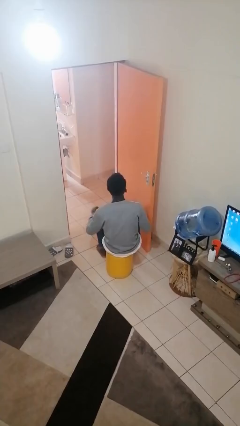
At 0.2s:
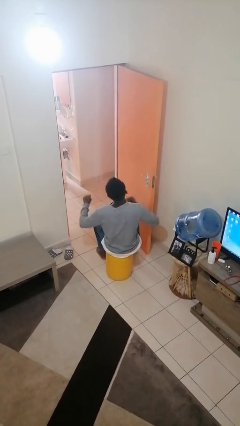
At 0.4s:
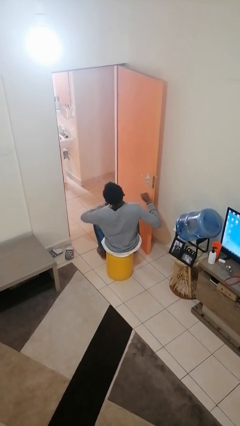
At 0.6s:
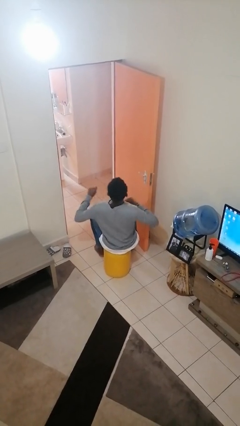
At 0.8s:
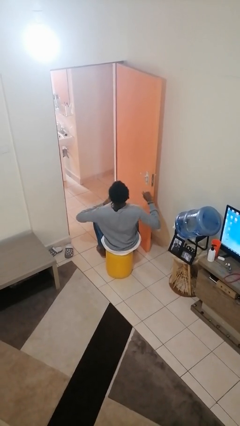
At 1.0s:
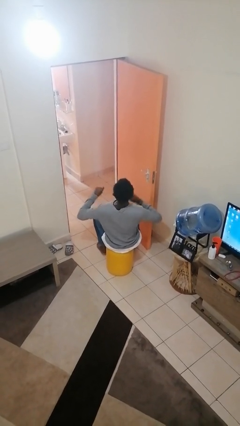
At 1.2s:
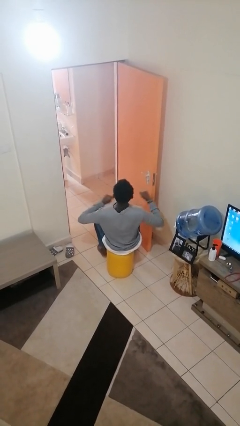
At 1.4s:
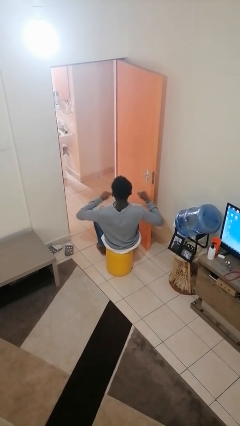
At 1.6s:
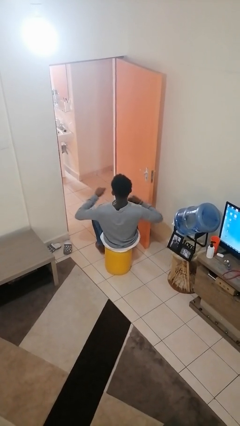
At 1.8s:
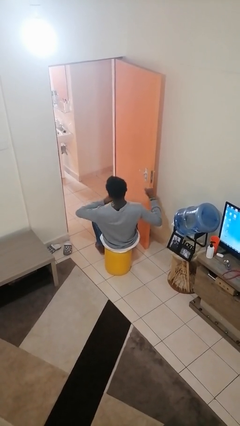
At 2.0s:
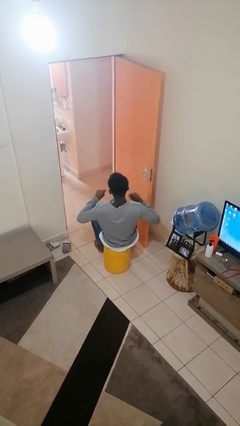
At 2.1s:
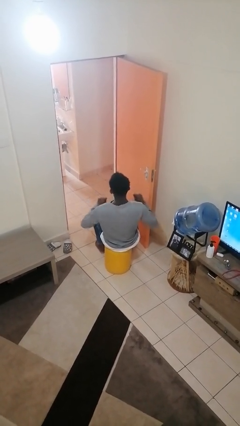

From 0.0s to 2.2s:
person drums on chest

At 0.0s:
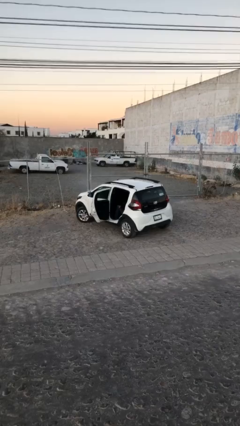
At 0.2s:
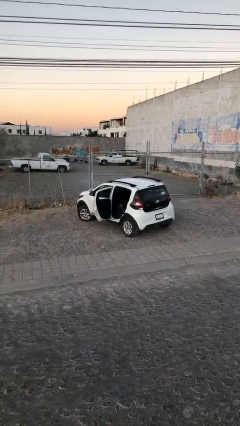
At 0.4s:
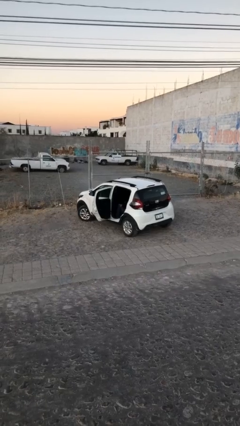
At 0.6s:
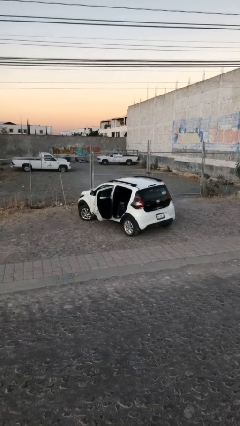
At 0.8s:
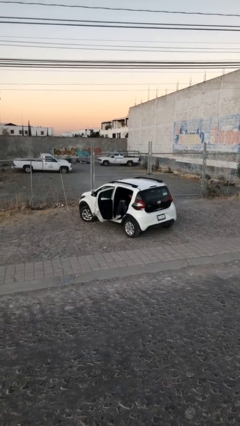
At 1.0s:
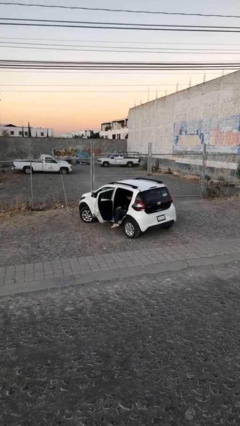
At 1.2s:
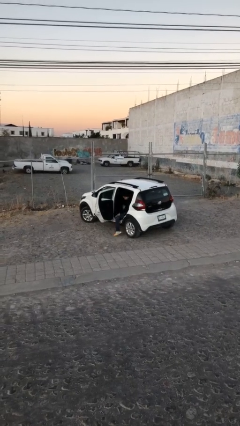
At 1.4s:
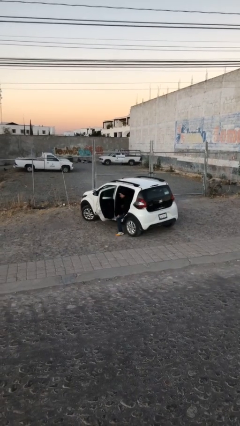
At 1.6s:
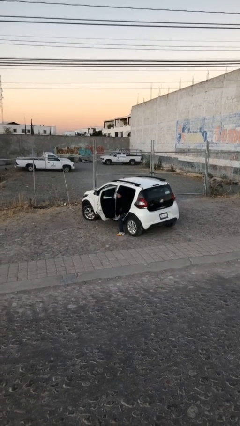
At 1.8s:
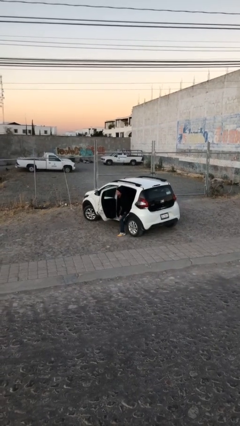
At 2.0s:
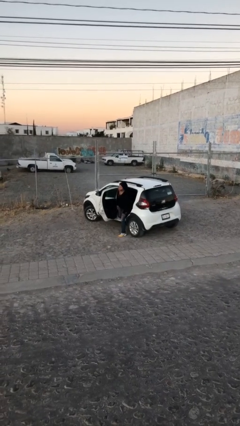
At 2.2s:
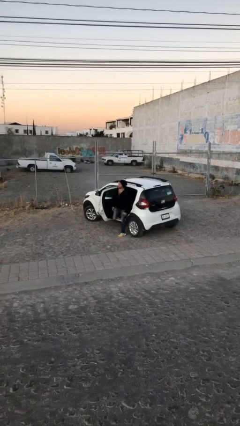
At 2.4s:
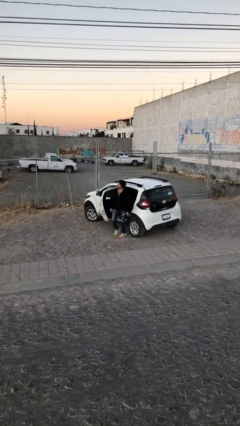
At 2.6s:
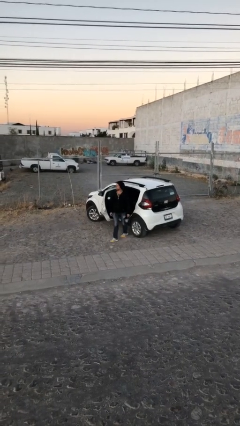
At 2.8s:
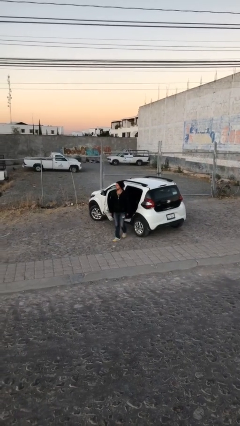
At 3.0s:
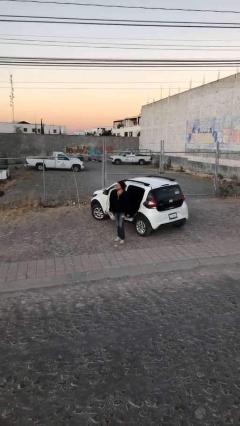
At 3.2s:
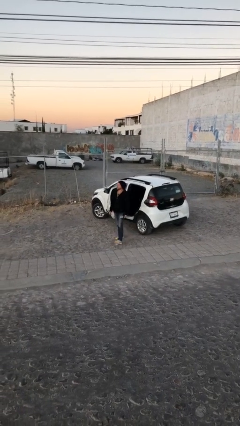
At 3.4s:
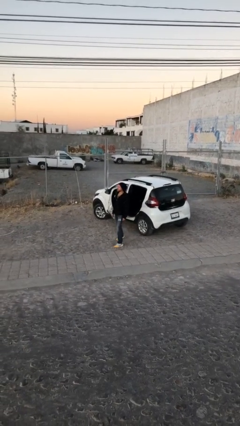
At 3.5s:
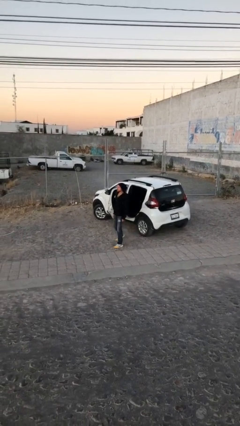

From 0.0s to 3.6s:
person exits car

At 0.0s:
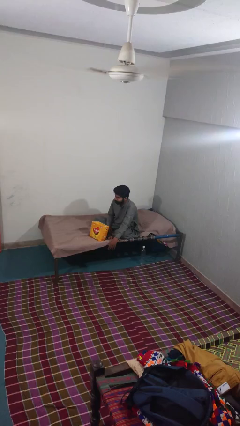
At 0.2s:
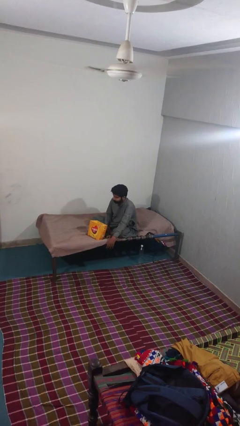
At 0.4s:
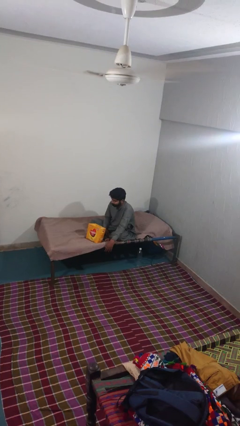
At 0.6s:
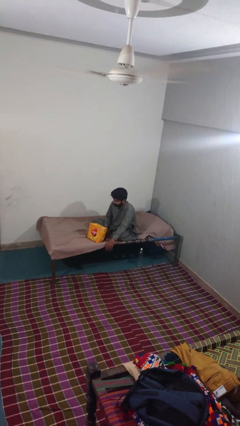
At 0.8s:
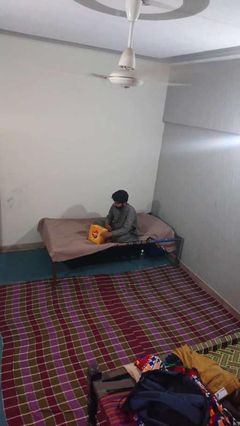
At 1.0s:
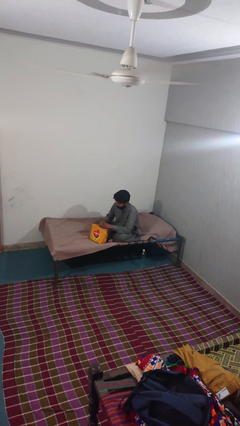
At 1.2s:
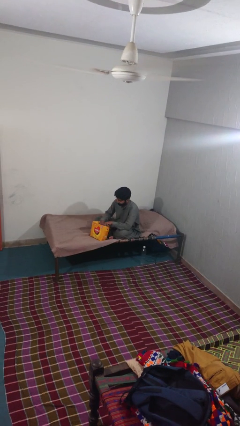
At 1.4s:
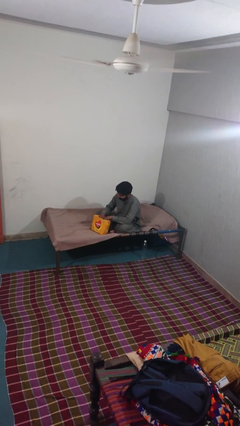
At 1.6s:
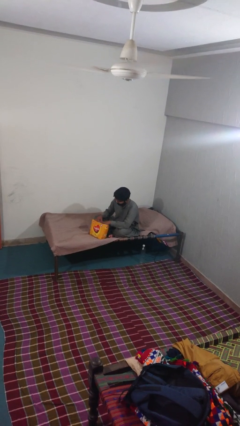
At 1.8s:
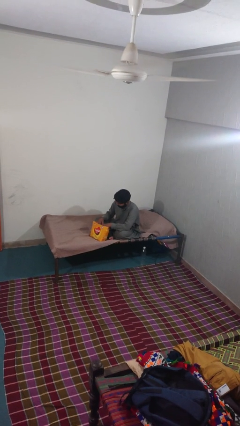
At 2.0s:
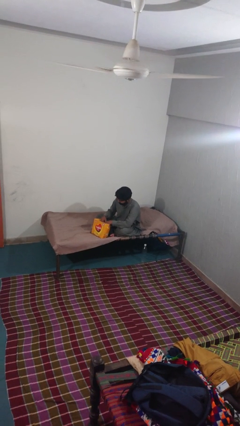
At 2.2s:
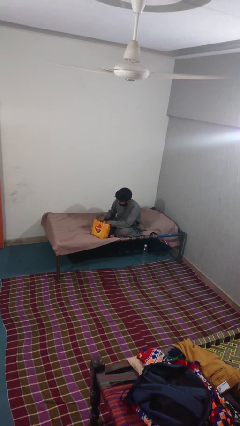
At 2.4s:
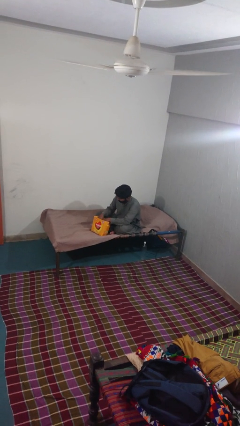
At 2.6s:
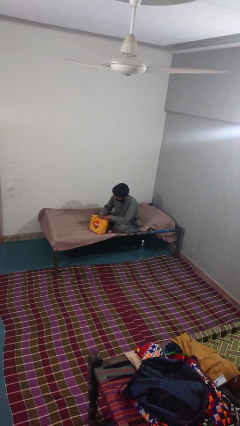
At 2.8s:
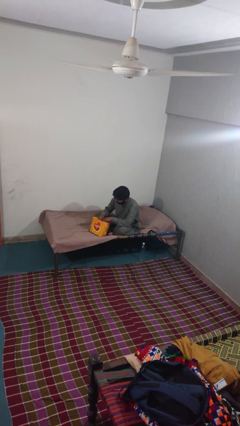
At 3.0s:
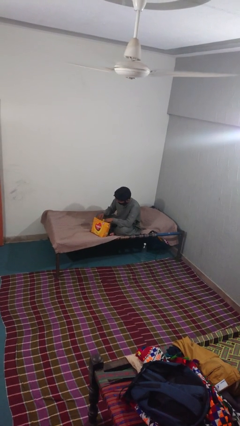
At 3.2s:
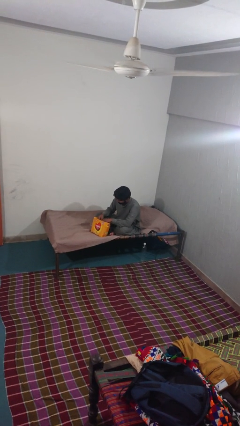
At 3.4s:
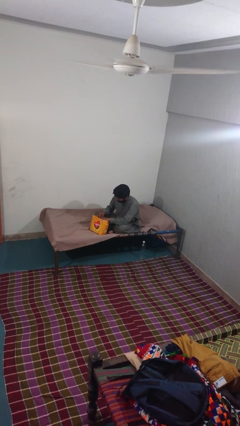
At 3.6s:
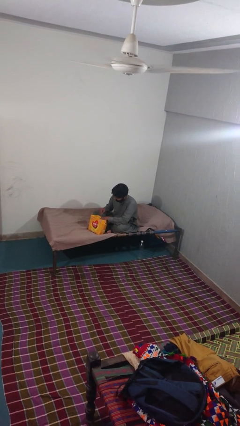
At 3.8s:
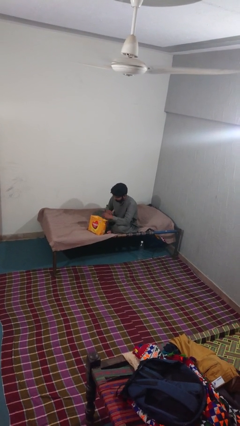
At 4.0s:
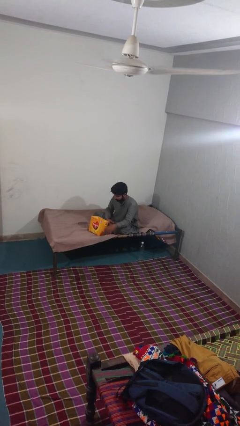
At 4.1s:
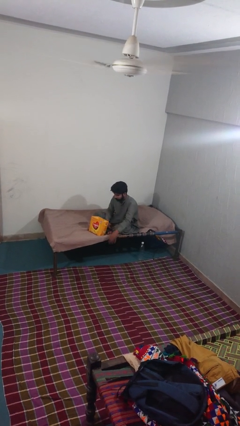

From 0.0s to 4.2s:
person searches in box

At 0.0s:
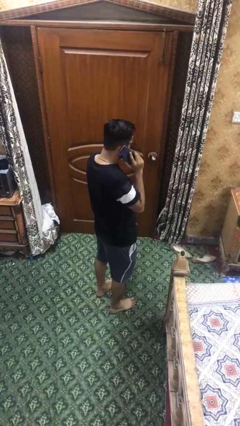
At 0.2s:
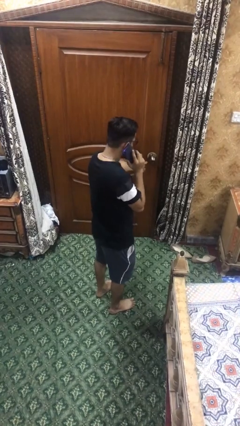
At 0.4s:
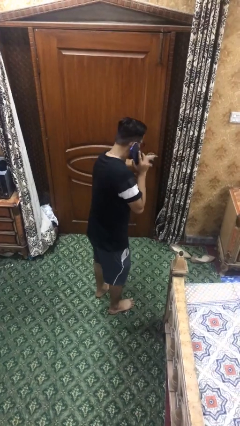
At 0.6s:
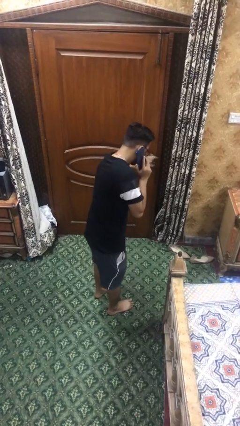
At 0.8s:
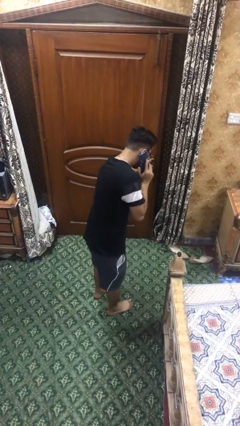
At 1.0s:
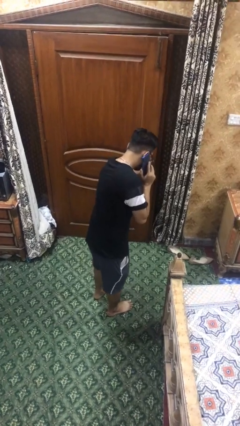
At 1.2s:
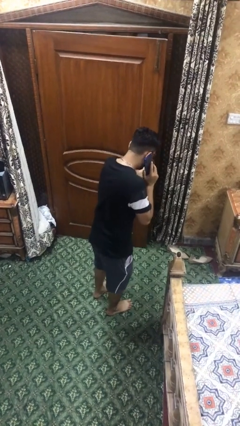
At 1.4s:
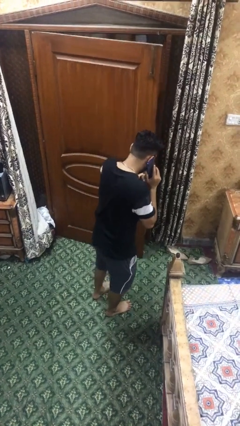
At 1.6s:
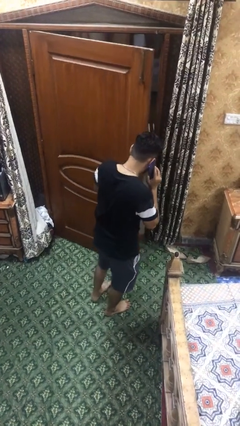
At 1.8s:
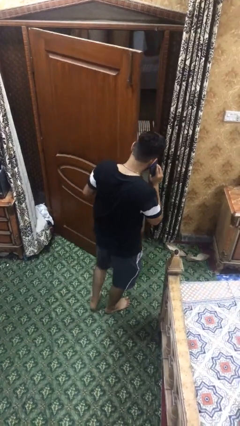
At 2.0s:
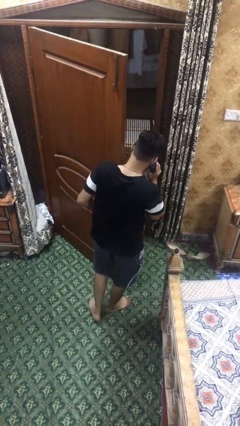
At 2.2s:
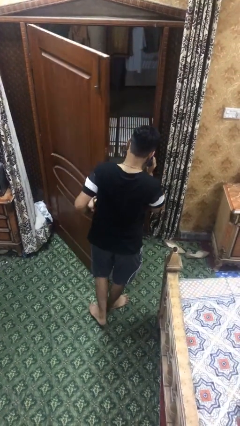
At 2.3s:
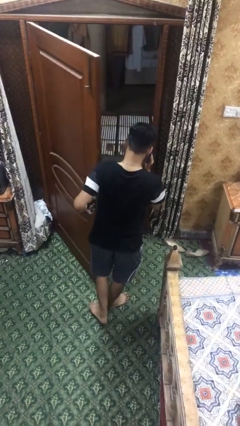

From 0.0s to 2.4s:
person opens facility door

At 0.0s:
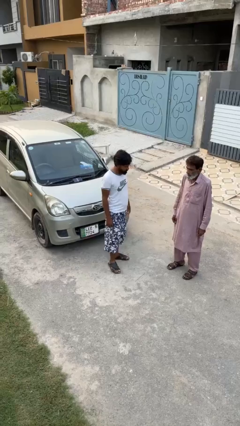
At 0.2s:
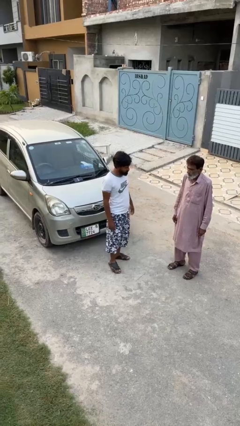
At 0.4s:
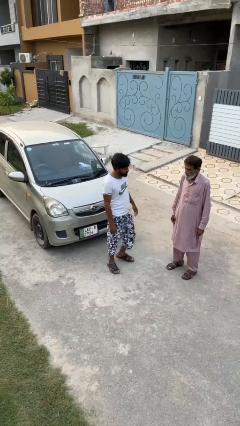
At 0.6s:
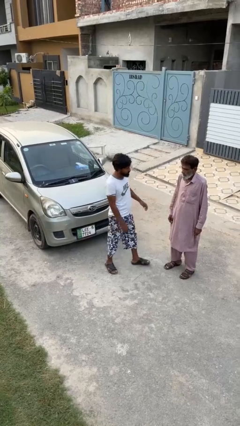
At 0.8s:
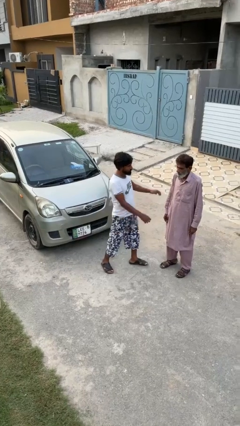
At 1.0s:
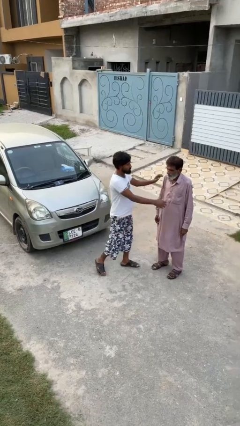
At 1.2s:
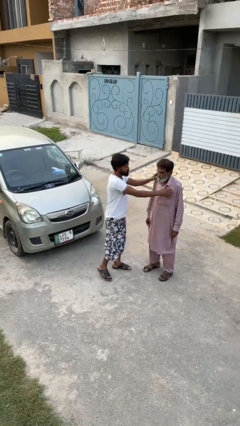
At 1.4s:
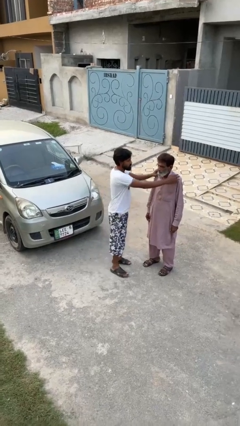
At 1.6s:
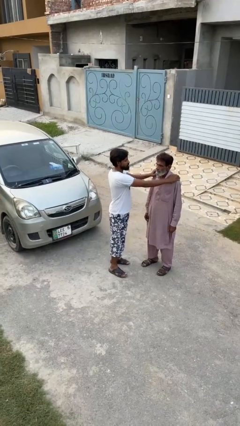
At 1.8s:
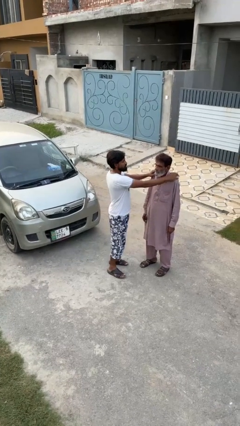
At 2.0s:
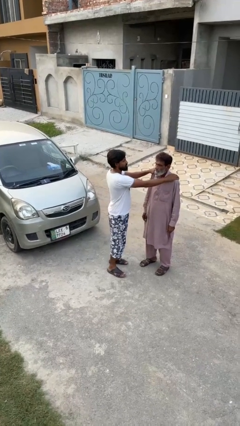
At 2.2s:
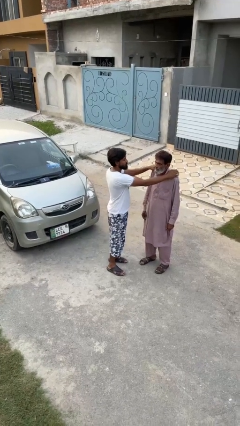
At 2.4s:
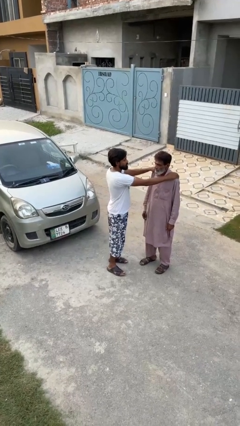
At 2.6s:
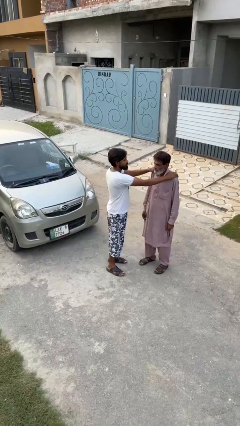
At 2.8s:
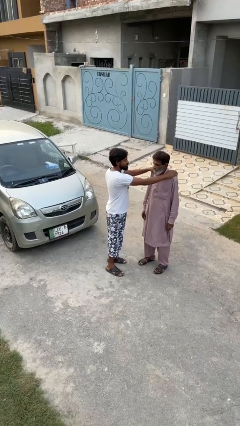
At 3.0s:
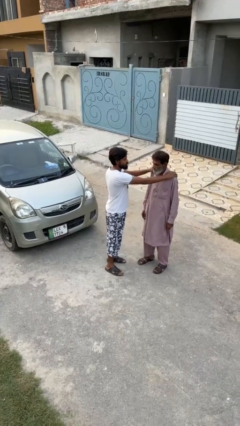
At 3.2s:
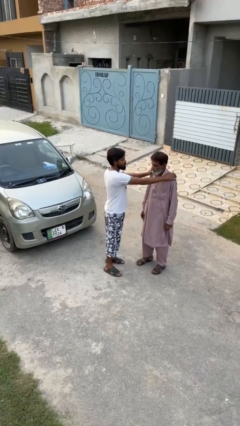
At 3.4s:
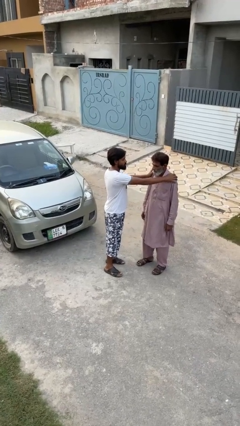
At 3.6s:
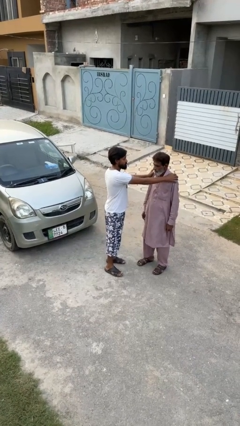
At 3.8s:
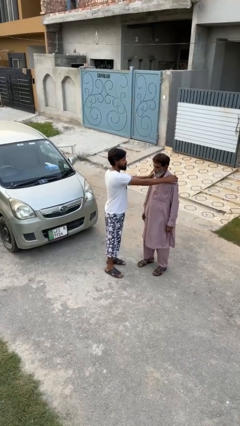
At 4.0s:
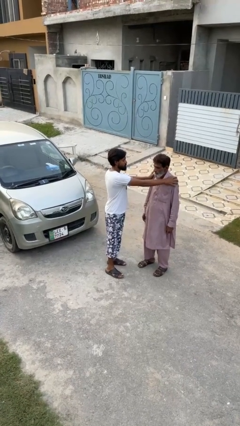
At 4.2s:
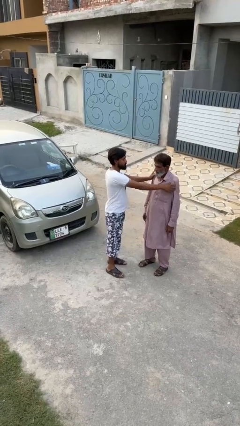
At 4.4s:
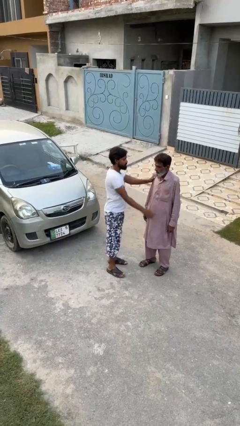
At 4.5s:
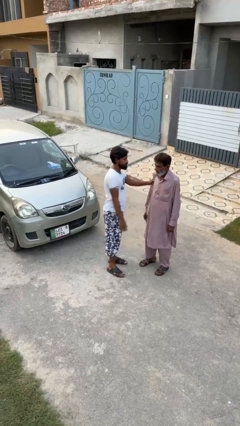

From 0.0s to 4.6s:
person pounds shoulders of person

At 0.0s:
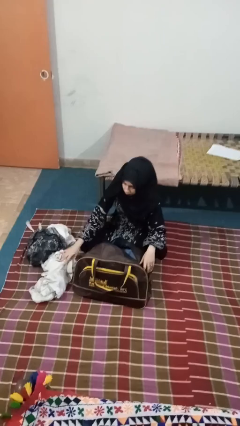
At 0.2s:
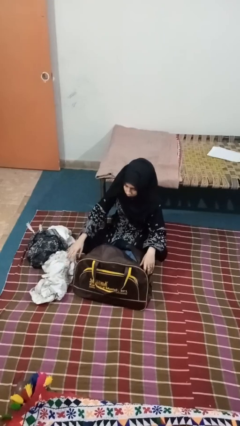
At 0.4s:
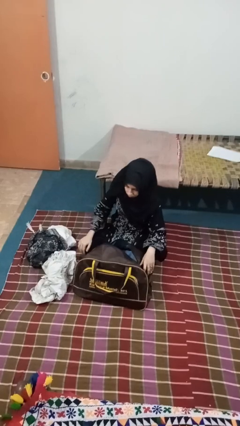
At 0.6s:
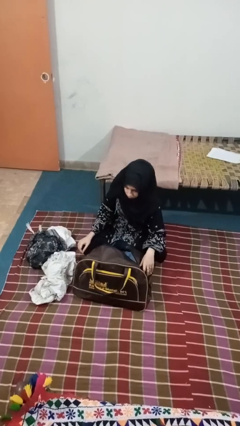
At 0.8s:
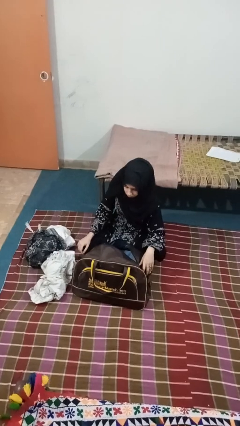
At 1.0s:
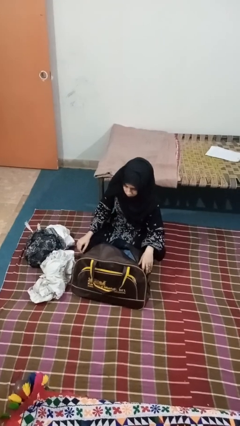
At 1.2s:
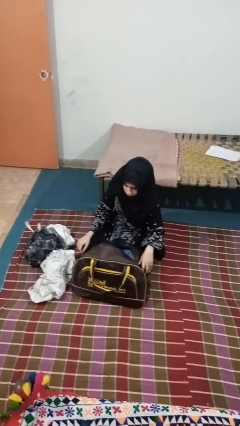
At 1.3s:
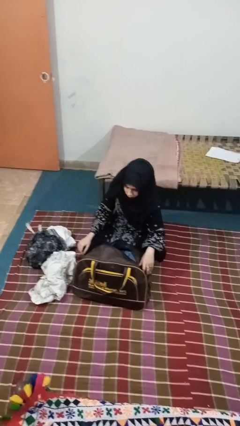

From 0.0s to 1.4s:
person unloads clothes from suitcase
